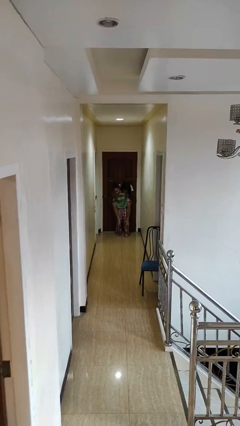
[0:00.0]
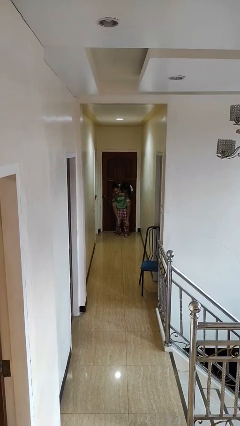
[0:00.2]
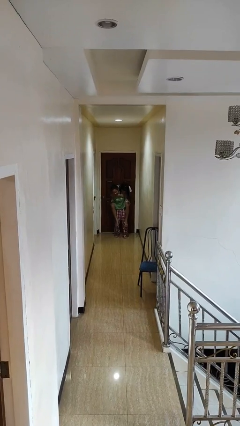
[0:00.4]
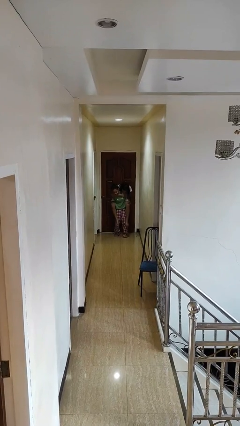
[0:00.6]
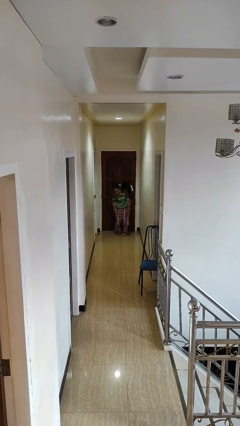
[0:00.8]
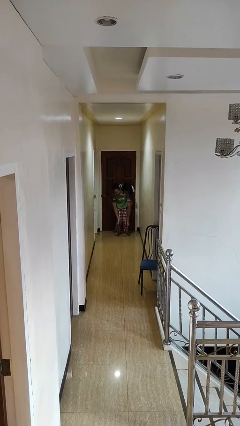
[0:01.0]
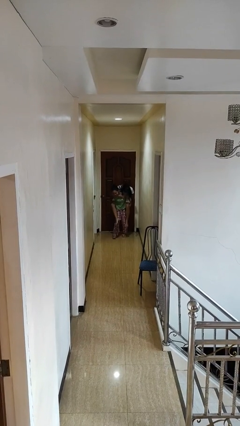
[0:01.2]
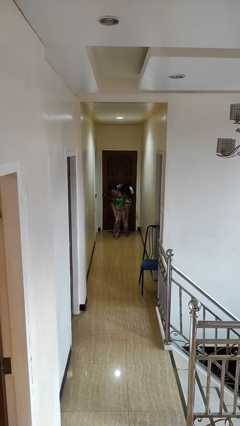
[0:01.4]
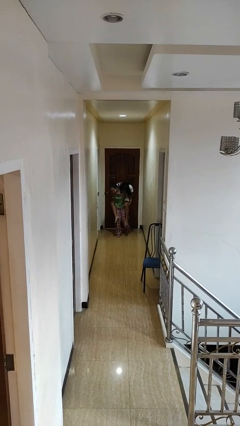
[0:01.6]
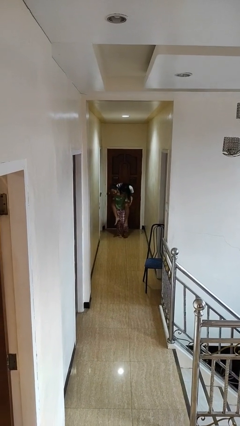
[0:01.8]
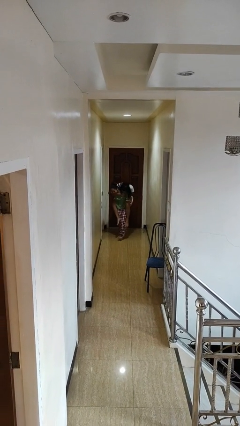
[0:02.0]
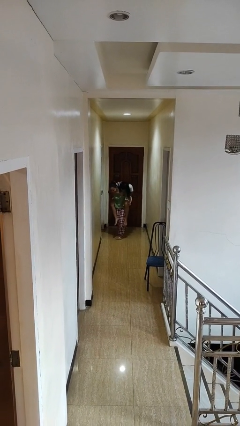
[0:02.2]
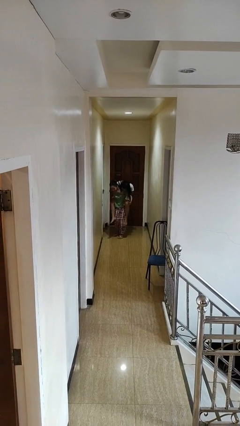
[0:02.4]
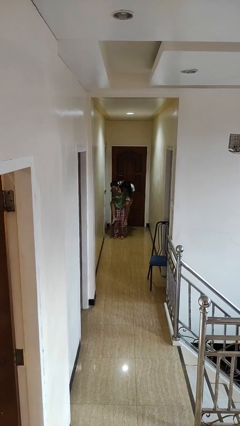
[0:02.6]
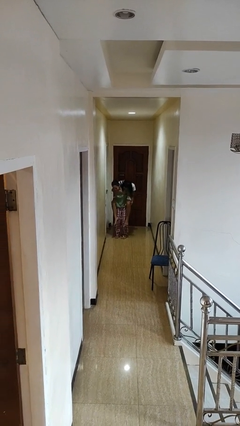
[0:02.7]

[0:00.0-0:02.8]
person carries person on back

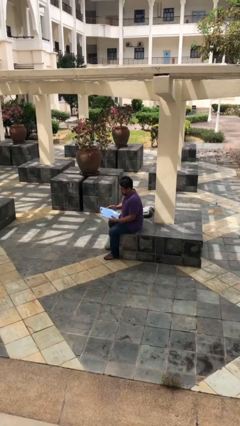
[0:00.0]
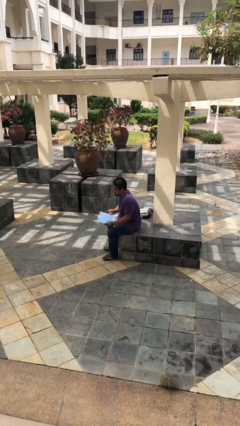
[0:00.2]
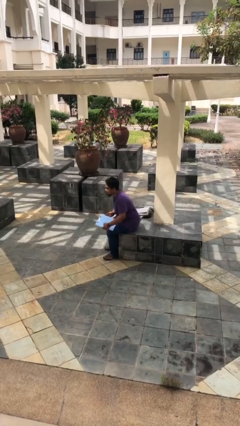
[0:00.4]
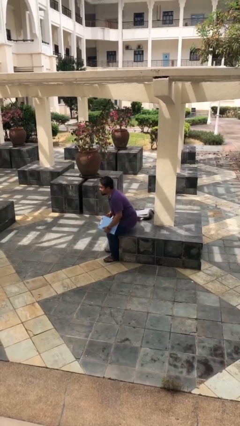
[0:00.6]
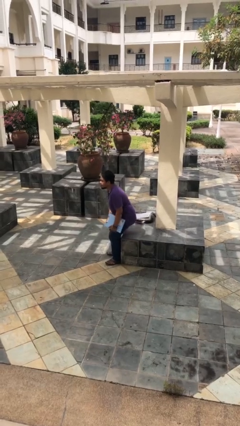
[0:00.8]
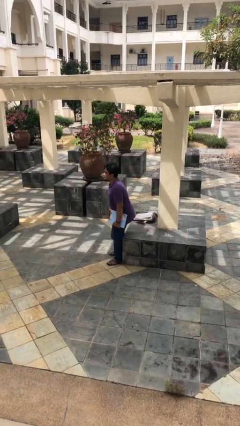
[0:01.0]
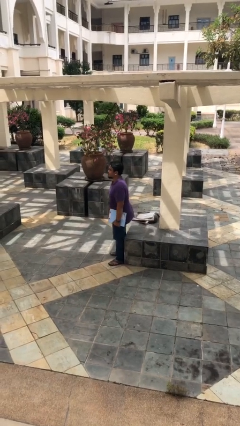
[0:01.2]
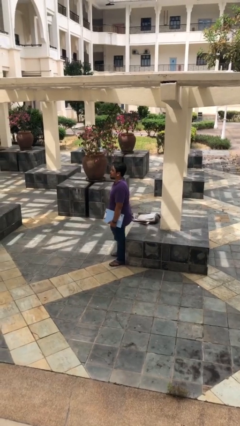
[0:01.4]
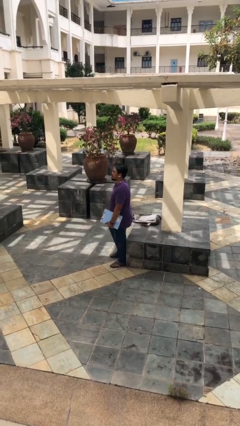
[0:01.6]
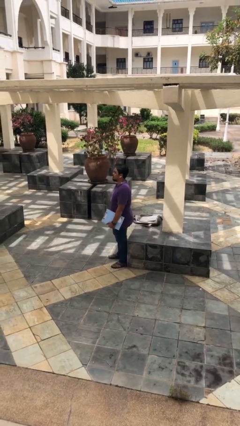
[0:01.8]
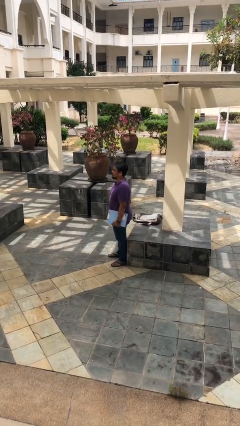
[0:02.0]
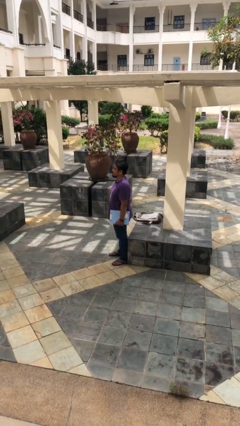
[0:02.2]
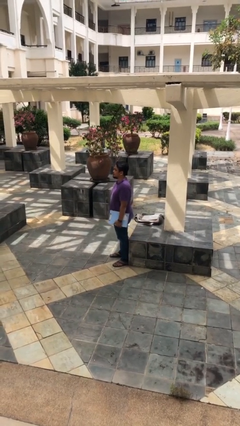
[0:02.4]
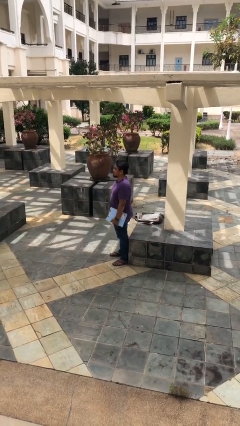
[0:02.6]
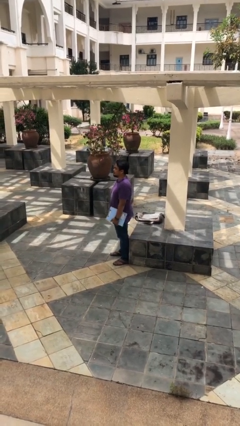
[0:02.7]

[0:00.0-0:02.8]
person stands up

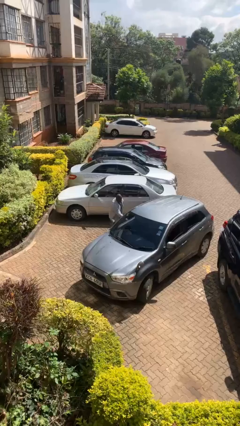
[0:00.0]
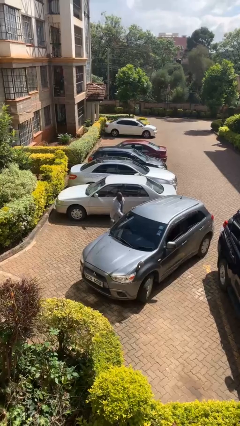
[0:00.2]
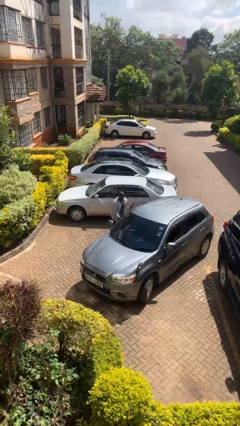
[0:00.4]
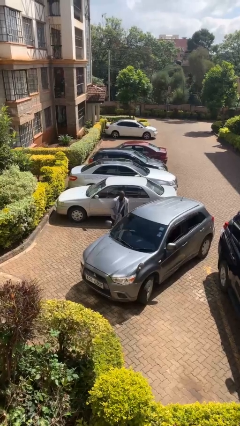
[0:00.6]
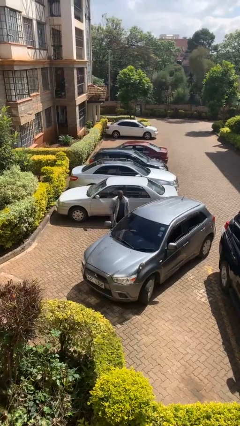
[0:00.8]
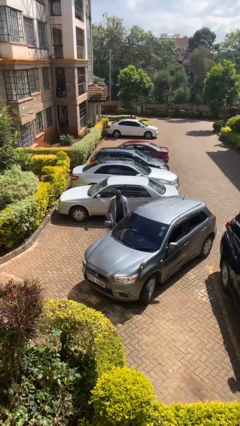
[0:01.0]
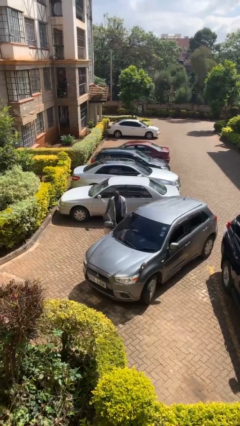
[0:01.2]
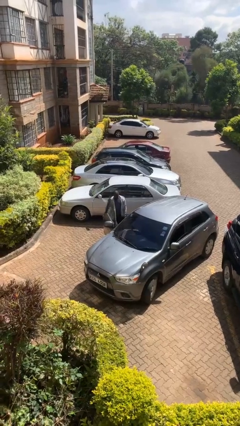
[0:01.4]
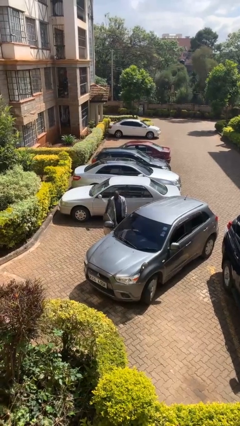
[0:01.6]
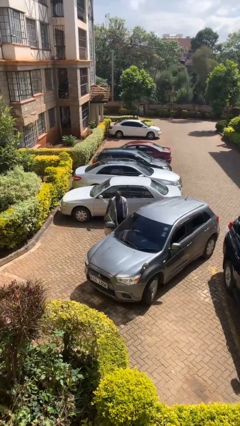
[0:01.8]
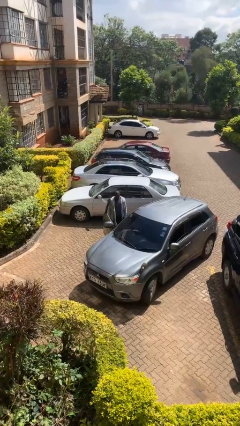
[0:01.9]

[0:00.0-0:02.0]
person opens car door

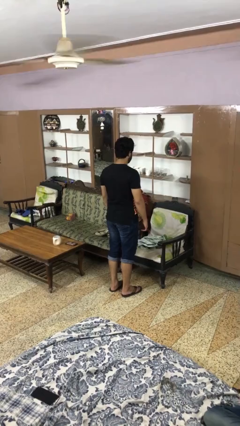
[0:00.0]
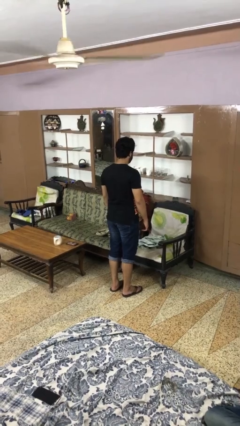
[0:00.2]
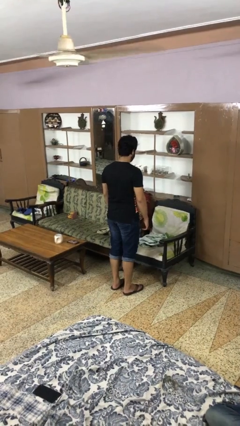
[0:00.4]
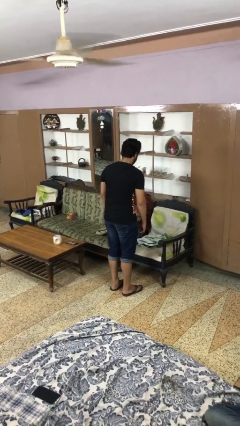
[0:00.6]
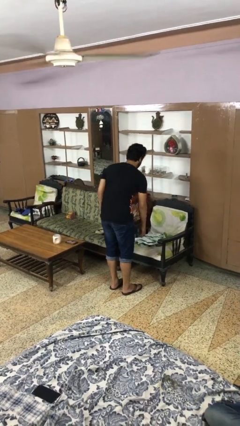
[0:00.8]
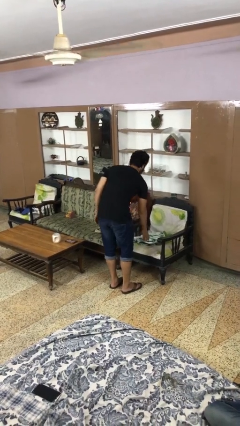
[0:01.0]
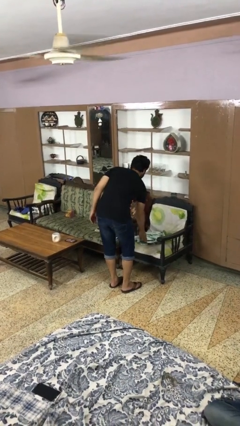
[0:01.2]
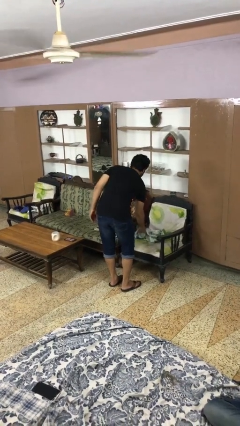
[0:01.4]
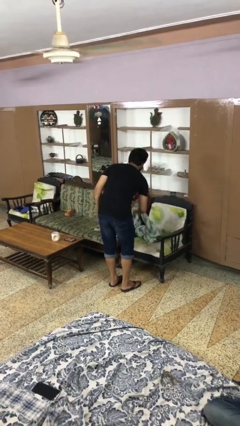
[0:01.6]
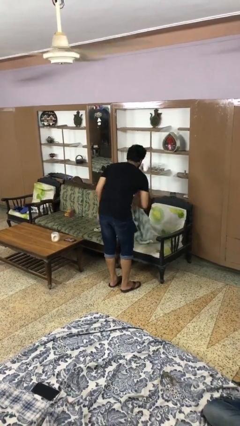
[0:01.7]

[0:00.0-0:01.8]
person picks up object from cabinet

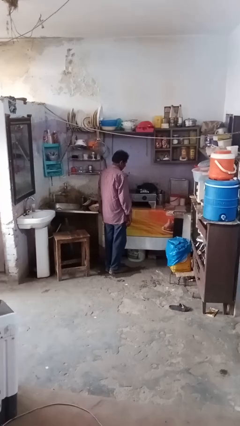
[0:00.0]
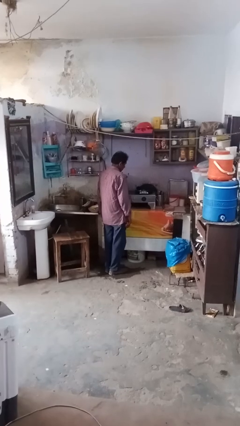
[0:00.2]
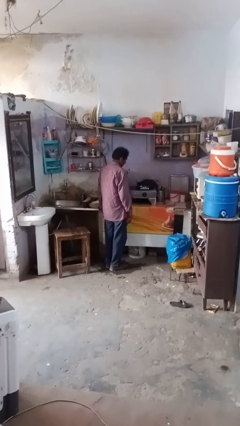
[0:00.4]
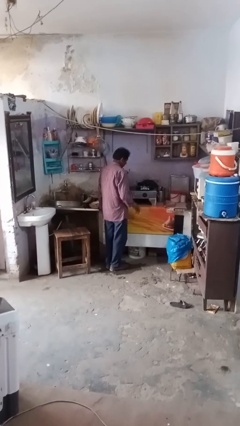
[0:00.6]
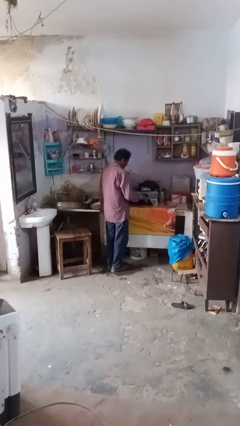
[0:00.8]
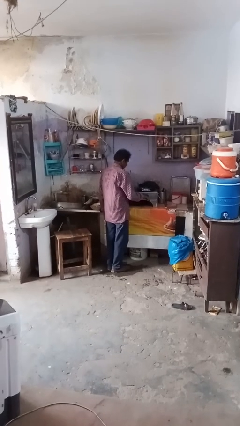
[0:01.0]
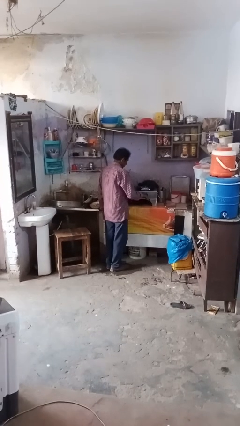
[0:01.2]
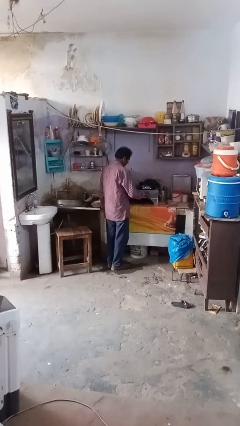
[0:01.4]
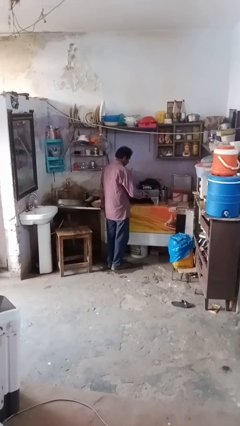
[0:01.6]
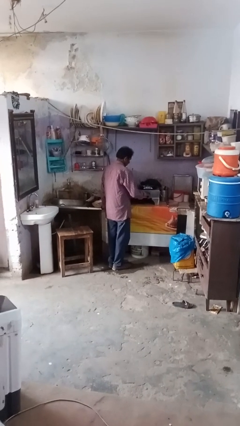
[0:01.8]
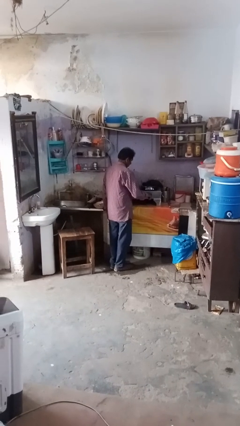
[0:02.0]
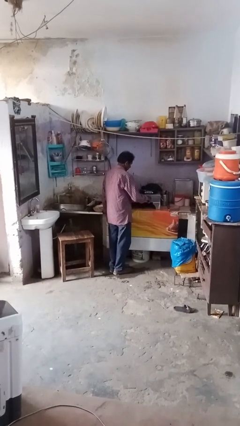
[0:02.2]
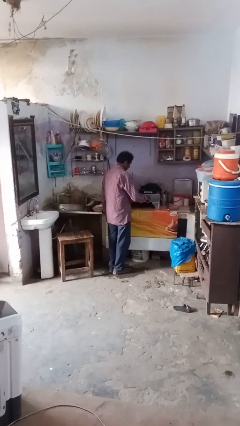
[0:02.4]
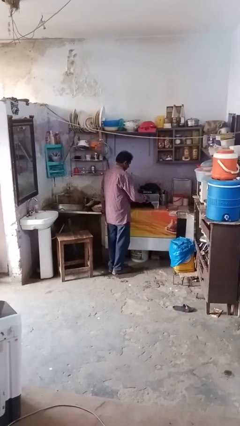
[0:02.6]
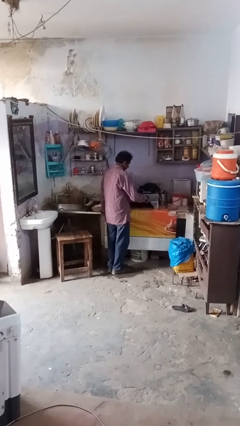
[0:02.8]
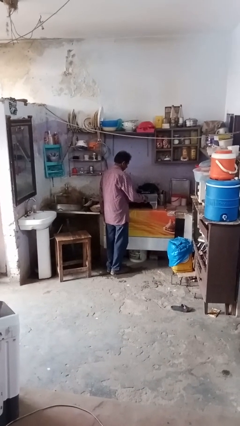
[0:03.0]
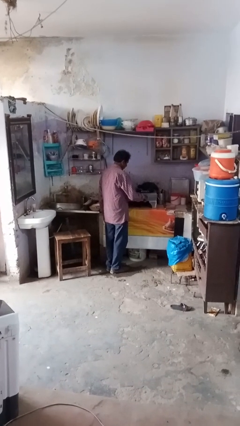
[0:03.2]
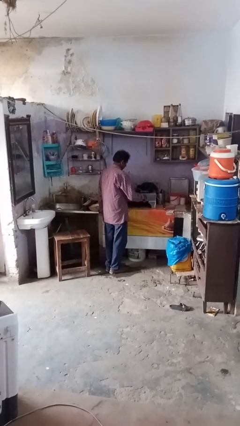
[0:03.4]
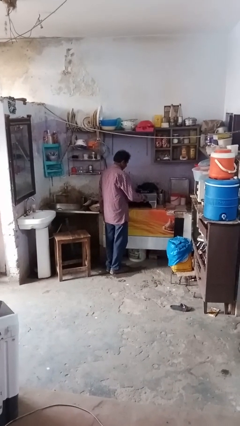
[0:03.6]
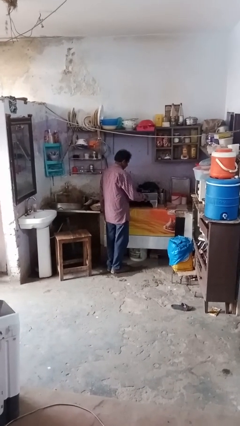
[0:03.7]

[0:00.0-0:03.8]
person turns off stovetop

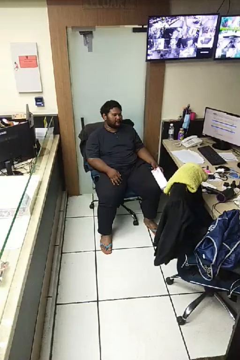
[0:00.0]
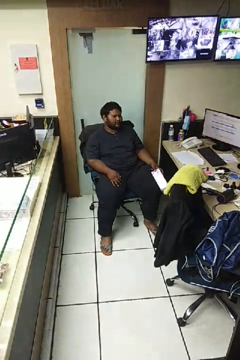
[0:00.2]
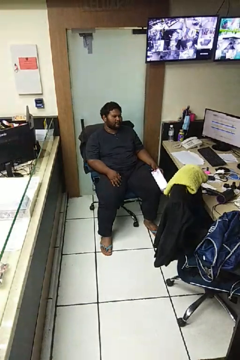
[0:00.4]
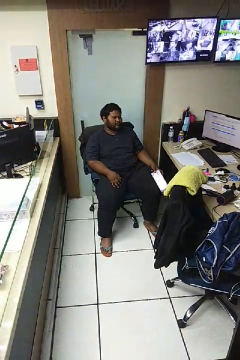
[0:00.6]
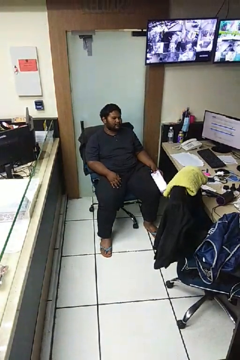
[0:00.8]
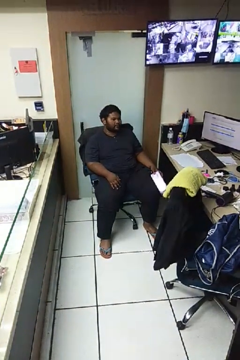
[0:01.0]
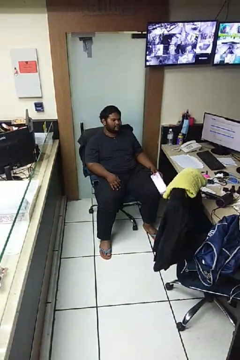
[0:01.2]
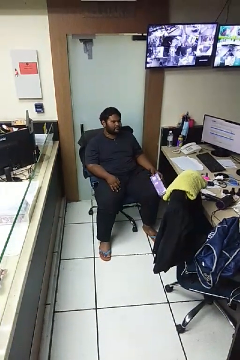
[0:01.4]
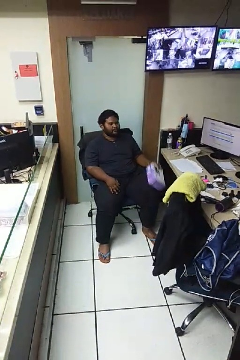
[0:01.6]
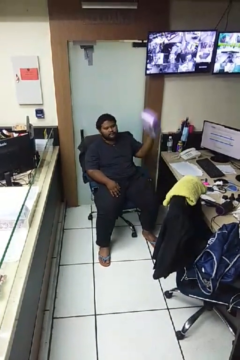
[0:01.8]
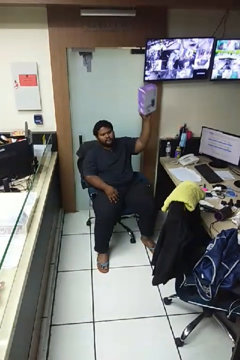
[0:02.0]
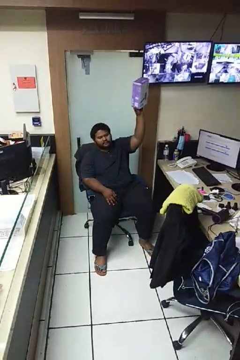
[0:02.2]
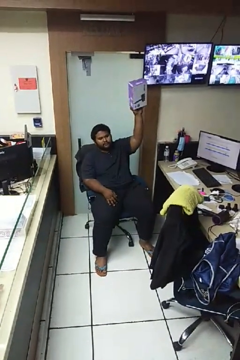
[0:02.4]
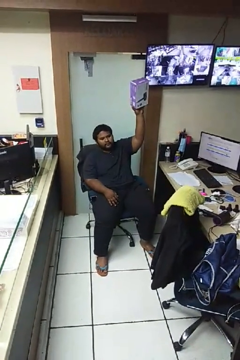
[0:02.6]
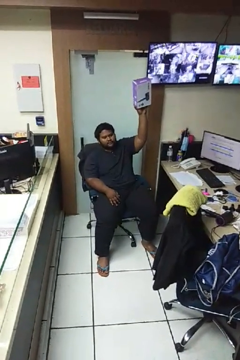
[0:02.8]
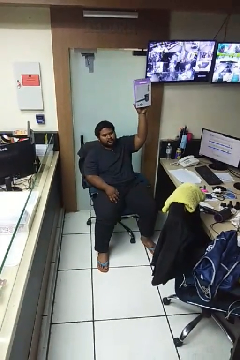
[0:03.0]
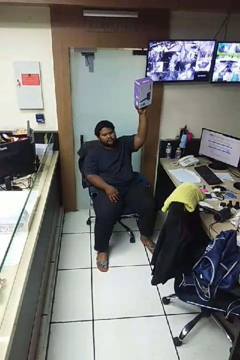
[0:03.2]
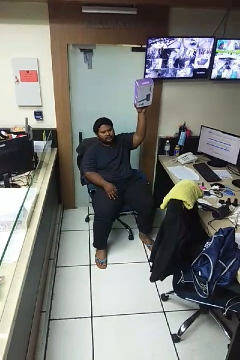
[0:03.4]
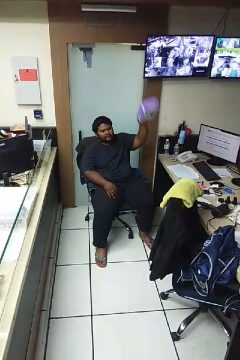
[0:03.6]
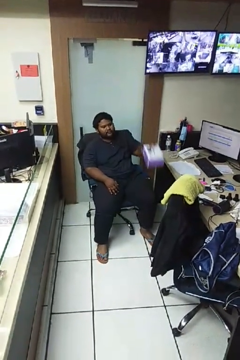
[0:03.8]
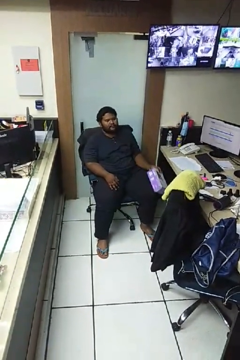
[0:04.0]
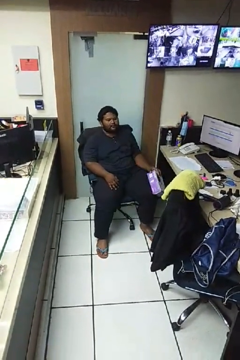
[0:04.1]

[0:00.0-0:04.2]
person holds object above head

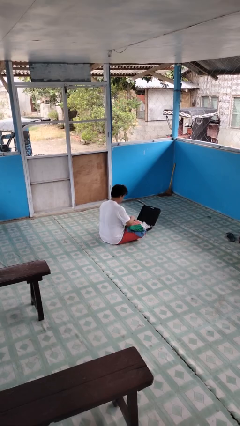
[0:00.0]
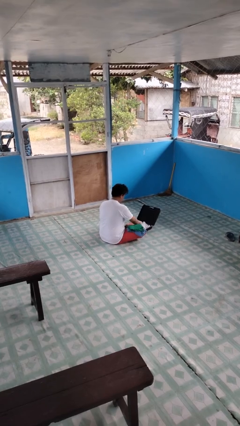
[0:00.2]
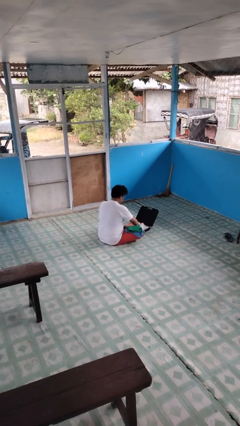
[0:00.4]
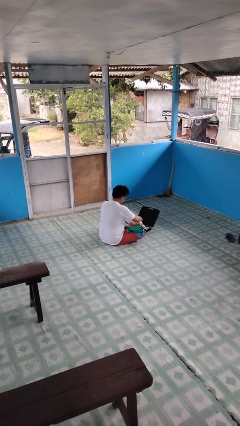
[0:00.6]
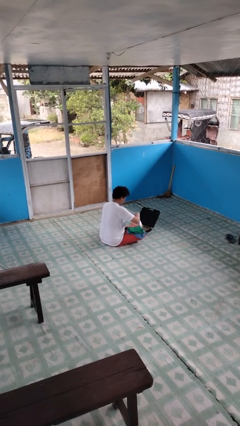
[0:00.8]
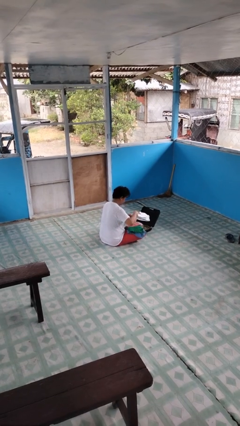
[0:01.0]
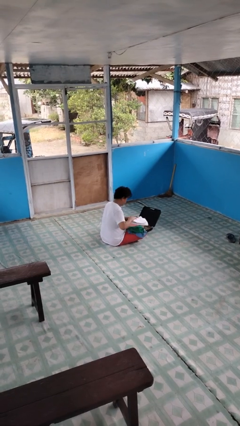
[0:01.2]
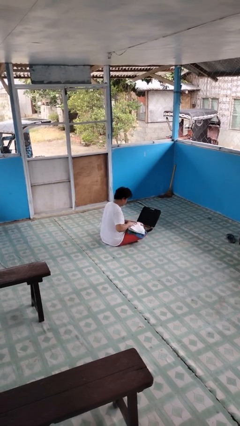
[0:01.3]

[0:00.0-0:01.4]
person unloads clothes from suitcase
